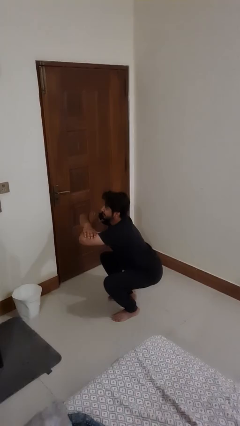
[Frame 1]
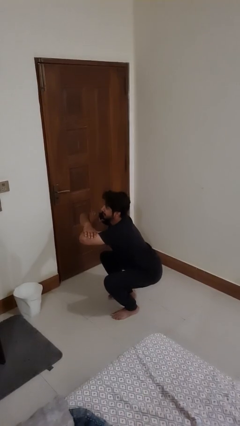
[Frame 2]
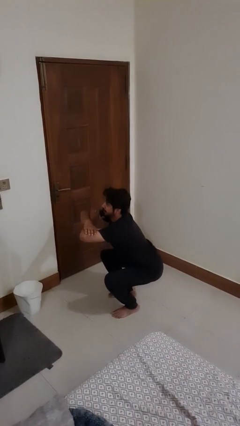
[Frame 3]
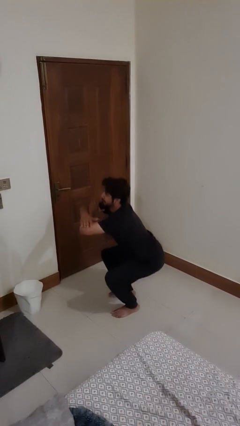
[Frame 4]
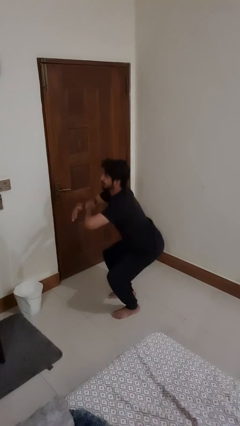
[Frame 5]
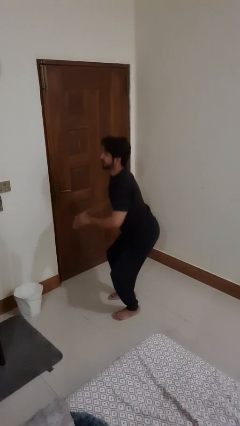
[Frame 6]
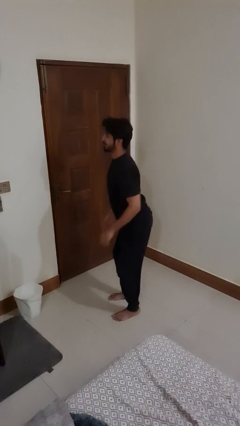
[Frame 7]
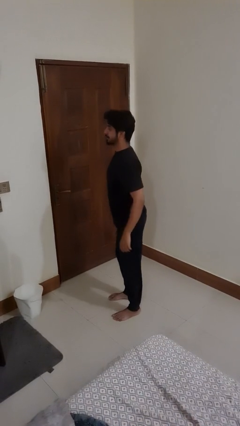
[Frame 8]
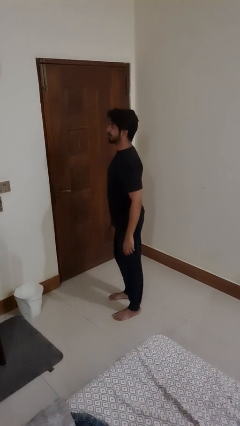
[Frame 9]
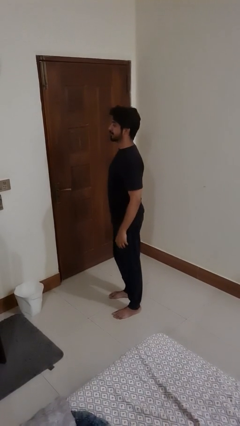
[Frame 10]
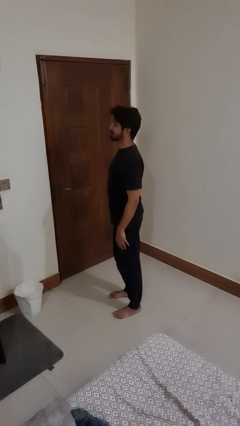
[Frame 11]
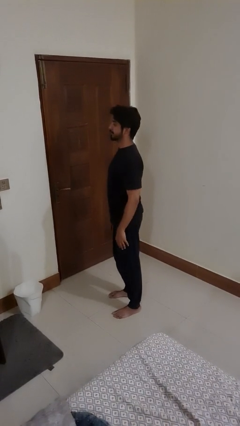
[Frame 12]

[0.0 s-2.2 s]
person stands up

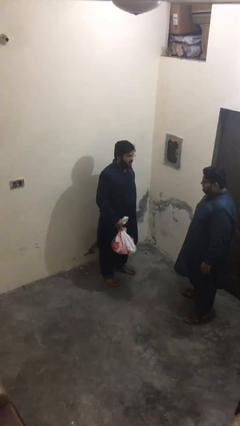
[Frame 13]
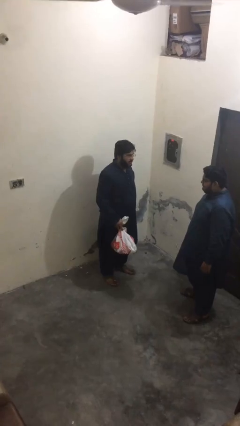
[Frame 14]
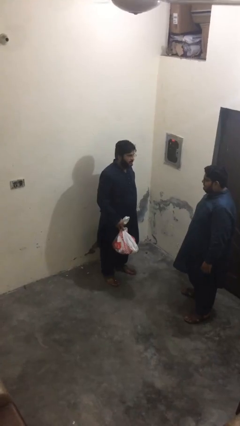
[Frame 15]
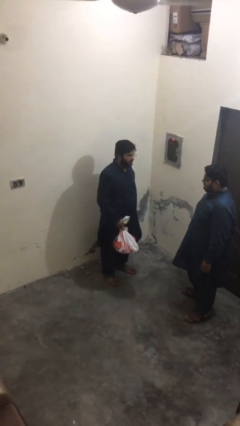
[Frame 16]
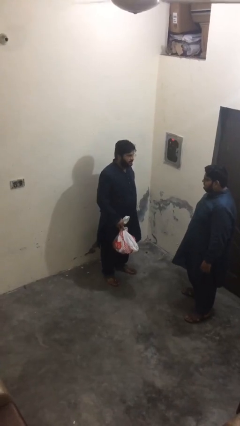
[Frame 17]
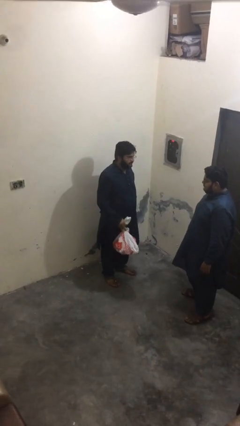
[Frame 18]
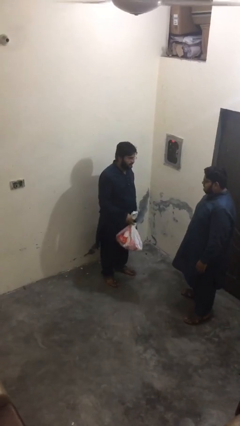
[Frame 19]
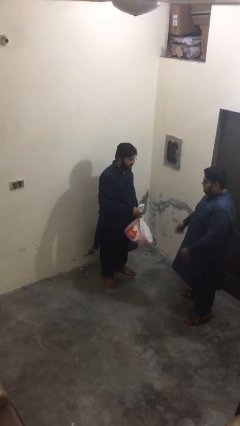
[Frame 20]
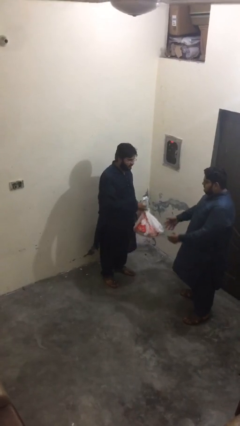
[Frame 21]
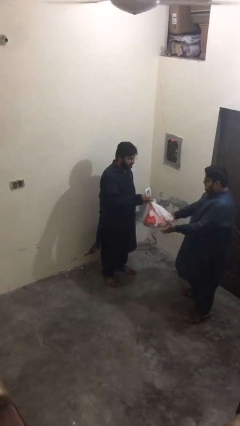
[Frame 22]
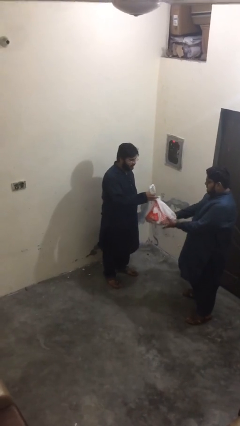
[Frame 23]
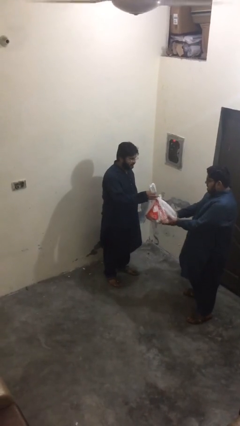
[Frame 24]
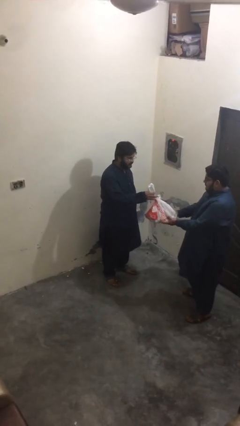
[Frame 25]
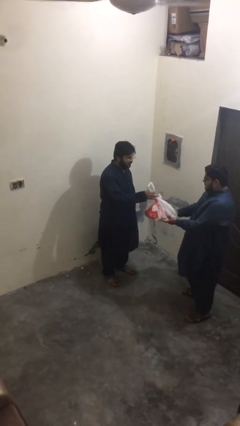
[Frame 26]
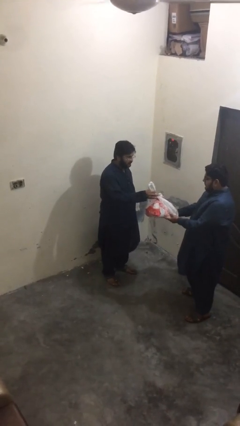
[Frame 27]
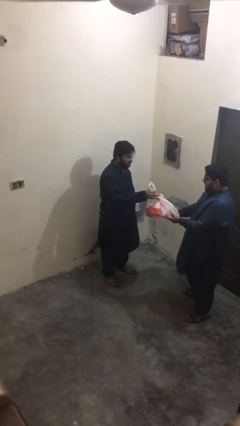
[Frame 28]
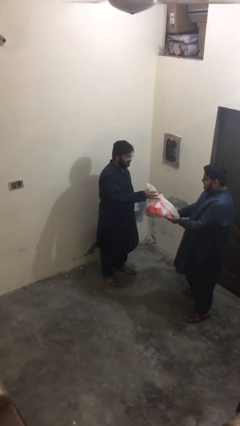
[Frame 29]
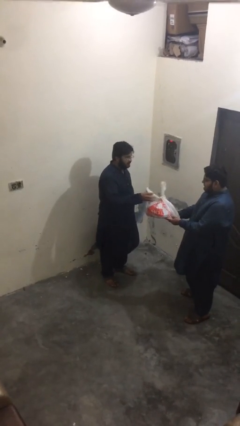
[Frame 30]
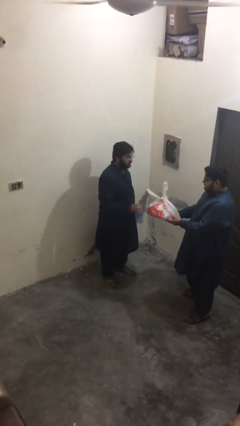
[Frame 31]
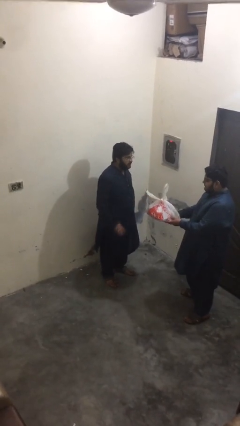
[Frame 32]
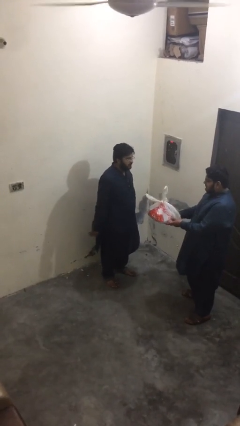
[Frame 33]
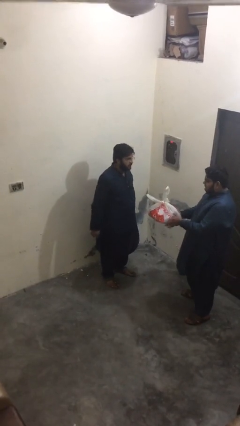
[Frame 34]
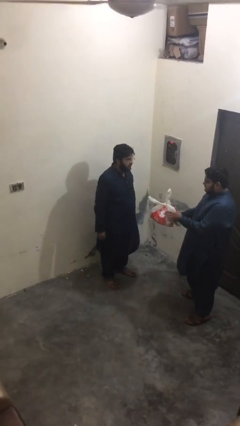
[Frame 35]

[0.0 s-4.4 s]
person transfers object to person

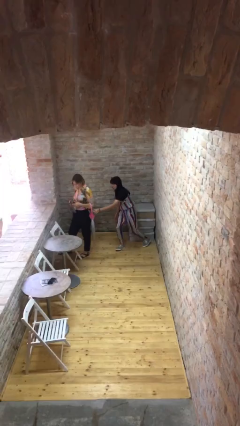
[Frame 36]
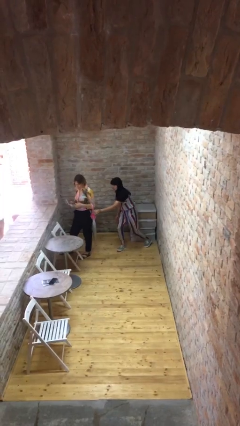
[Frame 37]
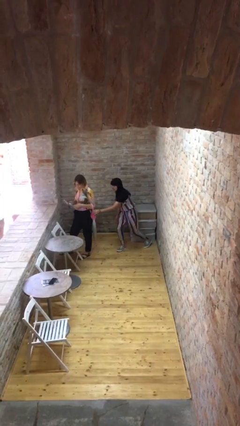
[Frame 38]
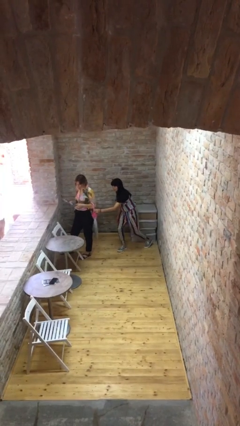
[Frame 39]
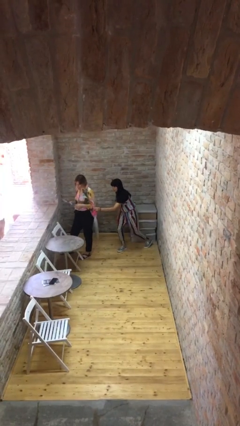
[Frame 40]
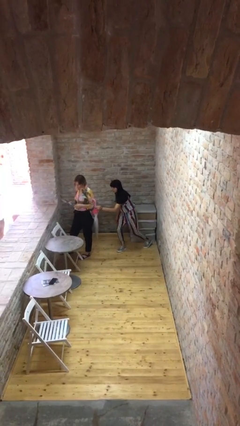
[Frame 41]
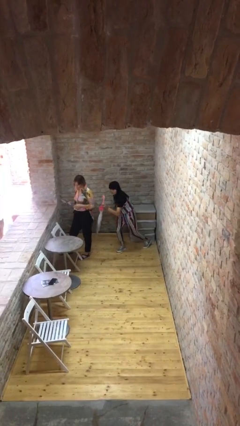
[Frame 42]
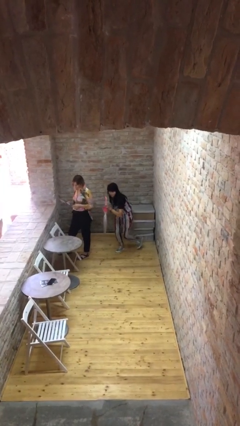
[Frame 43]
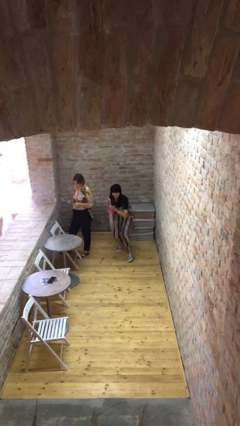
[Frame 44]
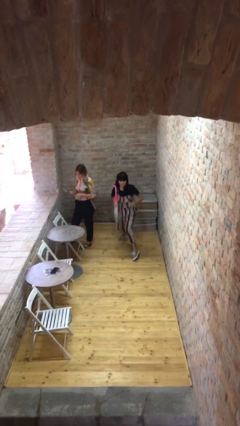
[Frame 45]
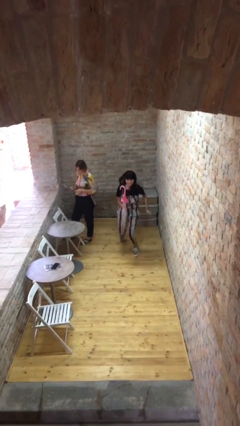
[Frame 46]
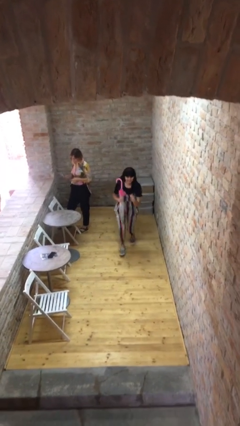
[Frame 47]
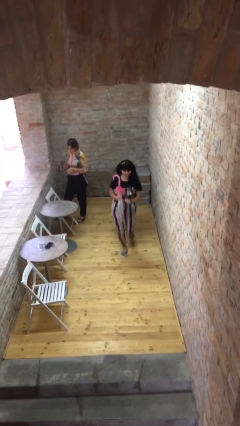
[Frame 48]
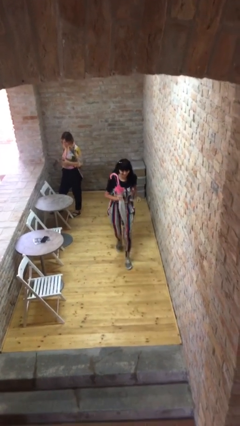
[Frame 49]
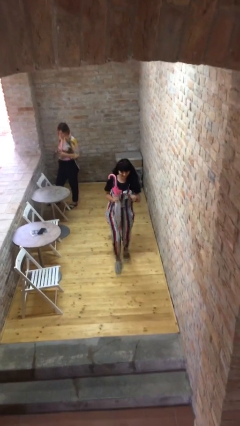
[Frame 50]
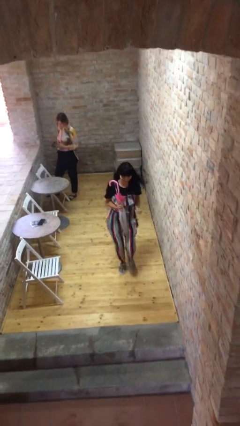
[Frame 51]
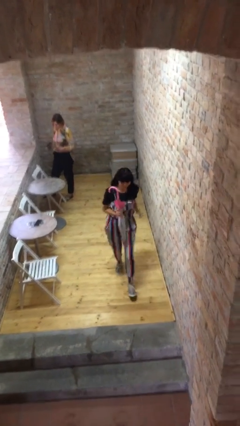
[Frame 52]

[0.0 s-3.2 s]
person steals object from person

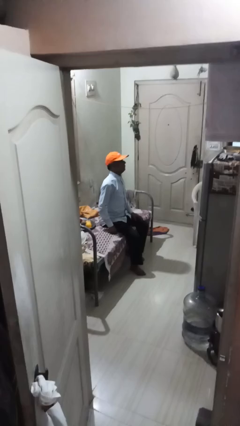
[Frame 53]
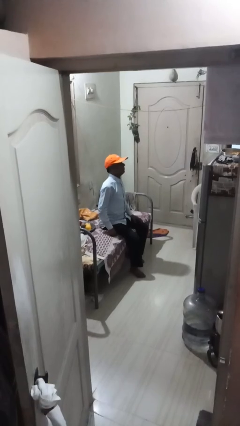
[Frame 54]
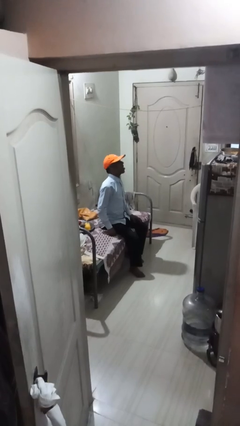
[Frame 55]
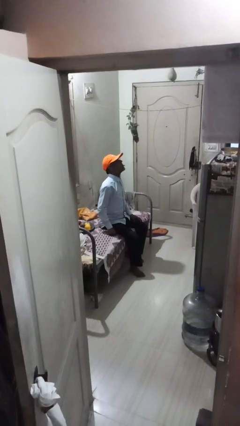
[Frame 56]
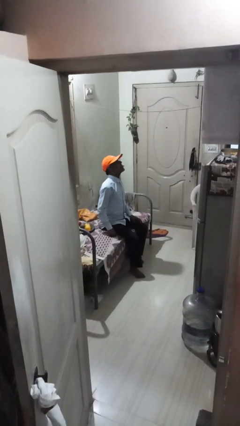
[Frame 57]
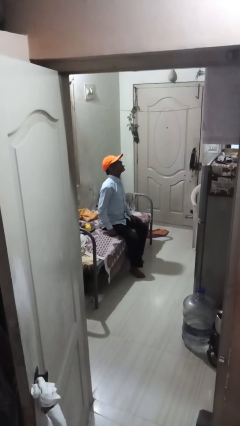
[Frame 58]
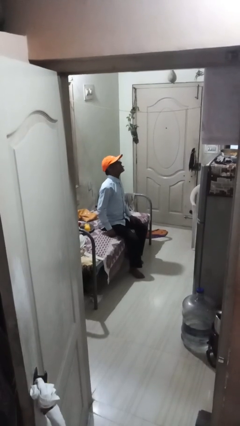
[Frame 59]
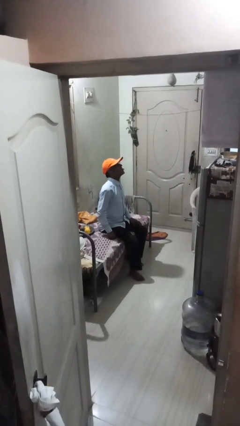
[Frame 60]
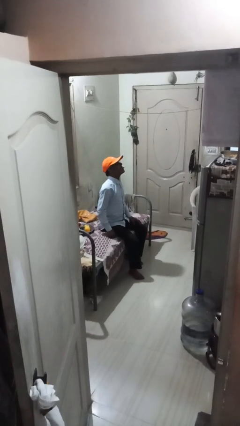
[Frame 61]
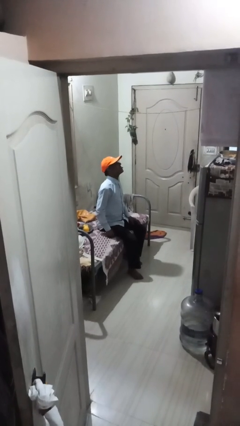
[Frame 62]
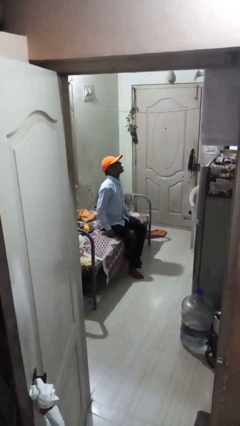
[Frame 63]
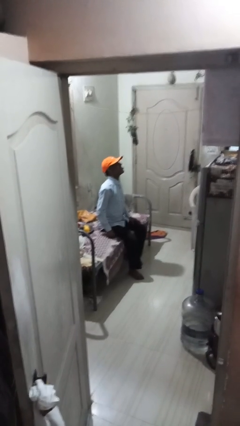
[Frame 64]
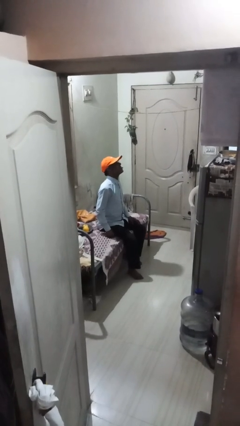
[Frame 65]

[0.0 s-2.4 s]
person sticks out tongue

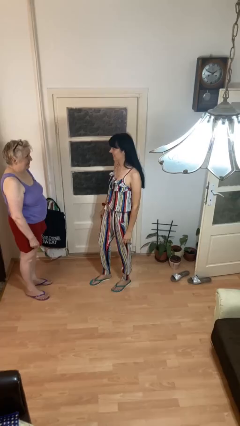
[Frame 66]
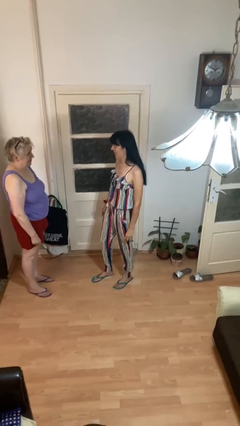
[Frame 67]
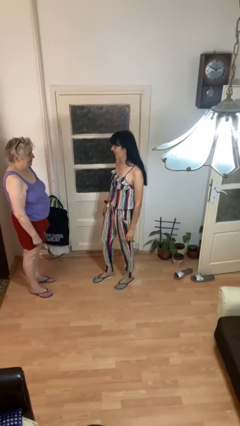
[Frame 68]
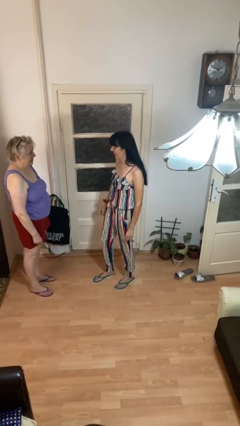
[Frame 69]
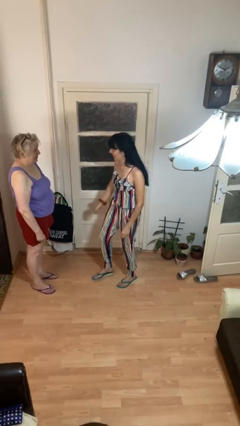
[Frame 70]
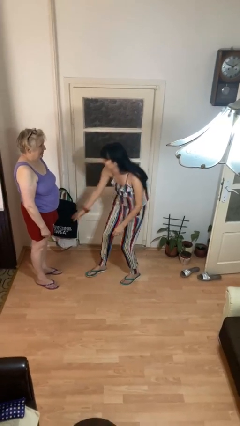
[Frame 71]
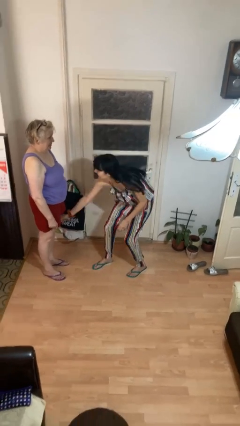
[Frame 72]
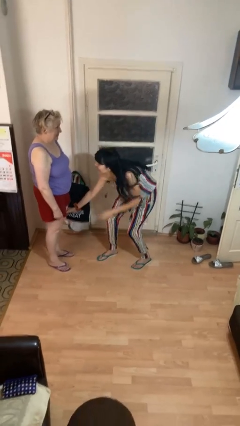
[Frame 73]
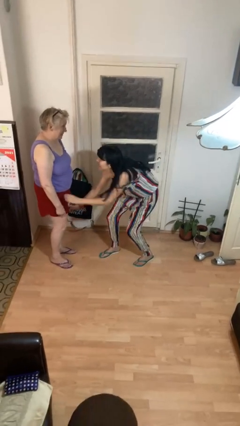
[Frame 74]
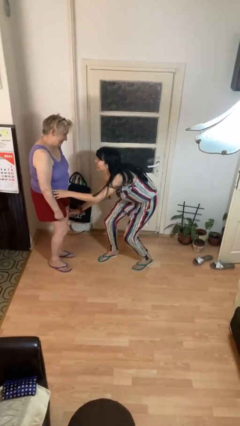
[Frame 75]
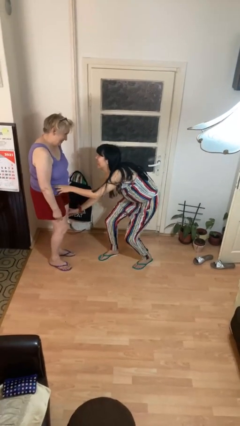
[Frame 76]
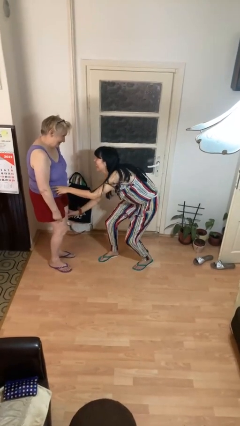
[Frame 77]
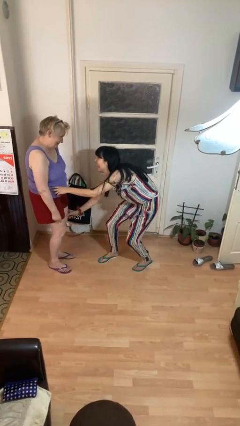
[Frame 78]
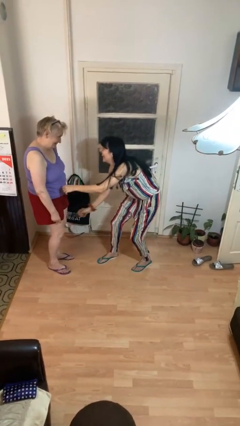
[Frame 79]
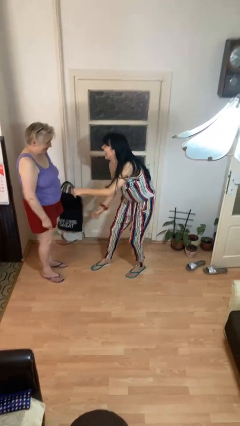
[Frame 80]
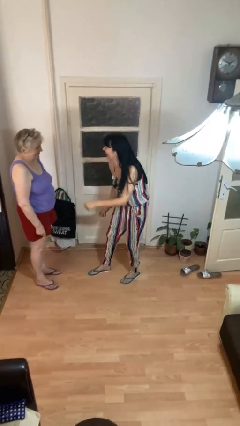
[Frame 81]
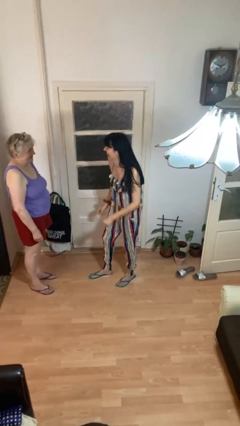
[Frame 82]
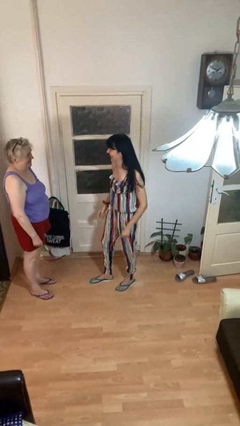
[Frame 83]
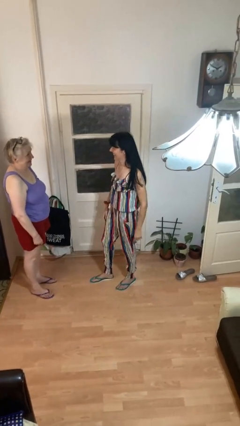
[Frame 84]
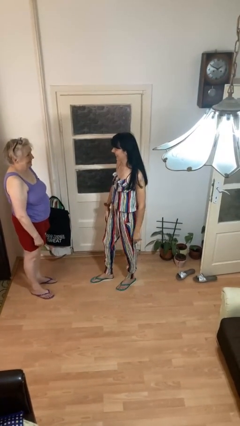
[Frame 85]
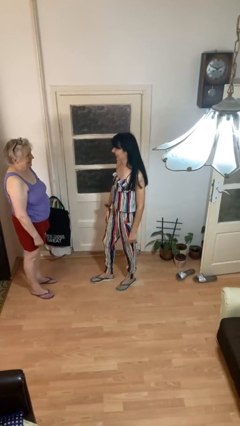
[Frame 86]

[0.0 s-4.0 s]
person tickles person

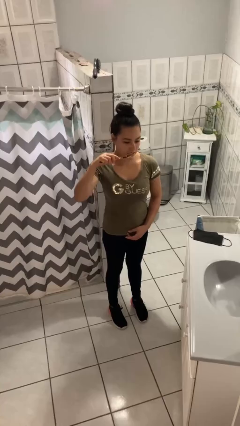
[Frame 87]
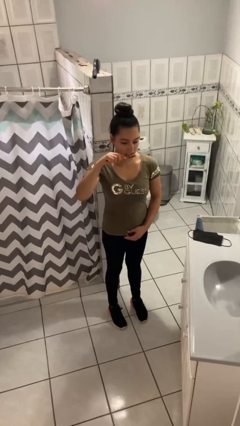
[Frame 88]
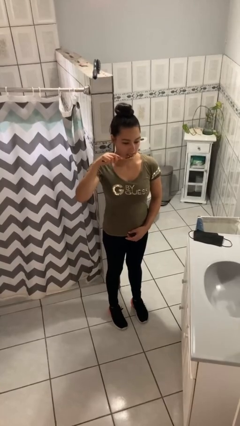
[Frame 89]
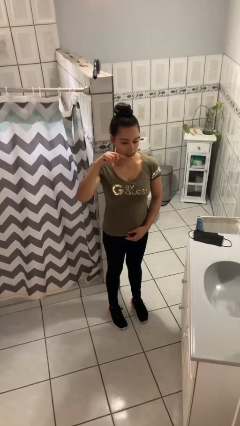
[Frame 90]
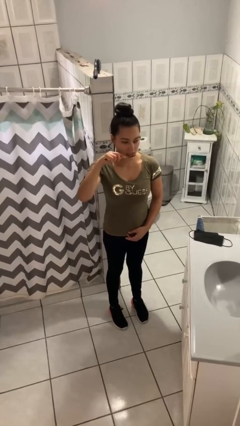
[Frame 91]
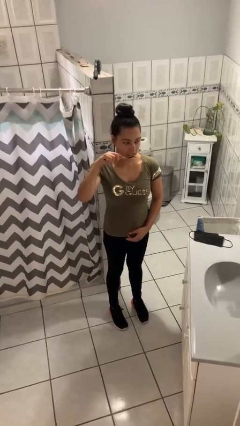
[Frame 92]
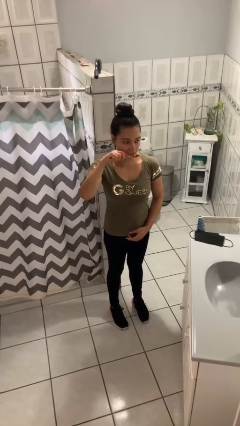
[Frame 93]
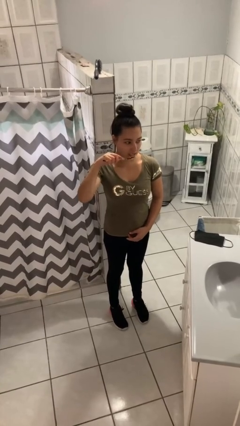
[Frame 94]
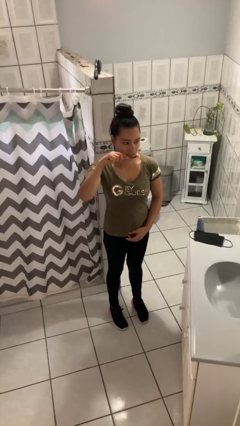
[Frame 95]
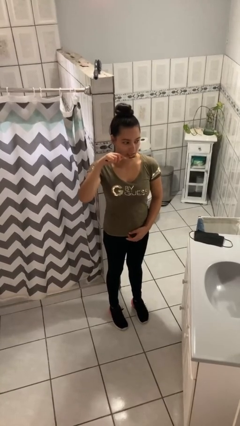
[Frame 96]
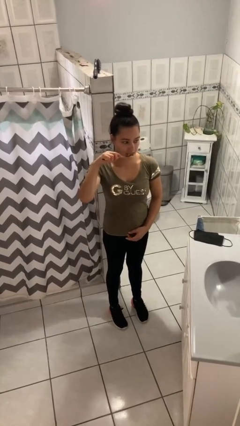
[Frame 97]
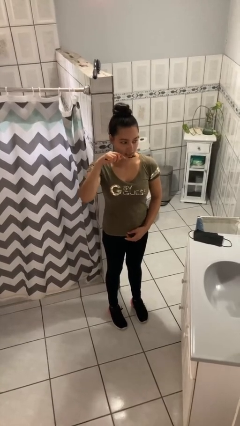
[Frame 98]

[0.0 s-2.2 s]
person brushes teeth
